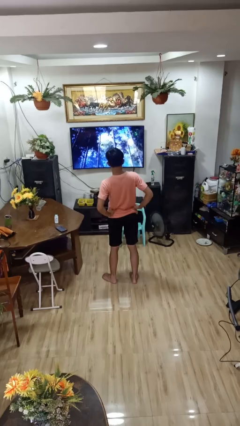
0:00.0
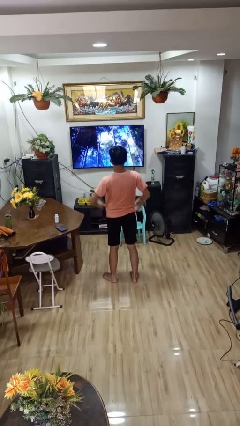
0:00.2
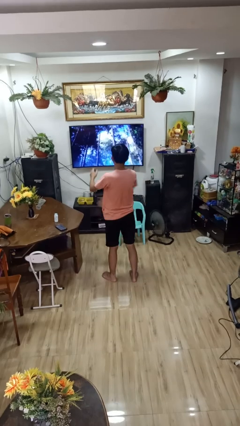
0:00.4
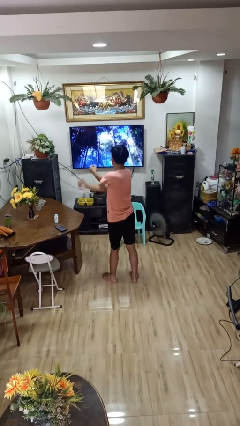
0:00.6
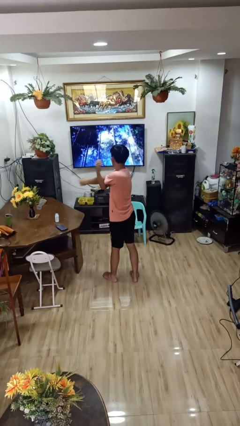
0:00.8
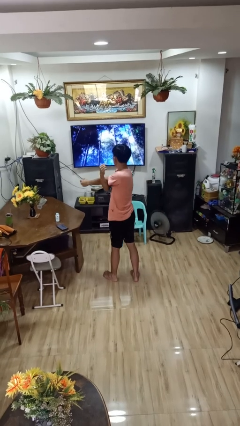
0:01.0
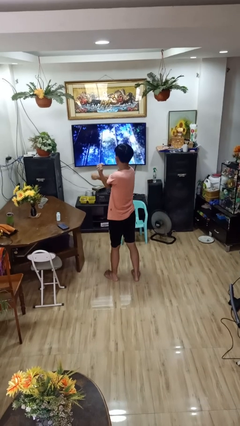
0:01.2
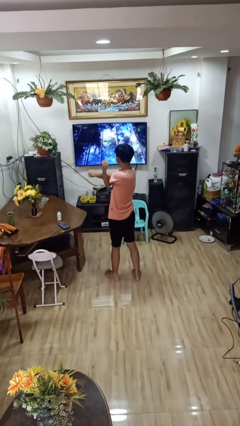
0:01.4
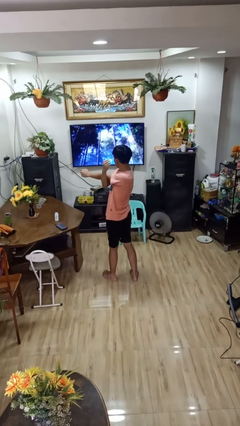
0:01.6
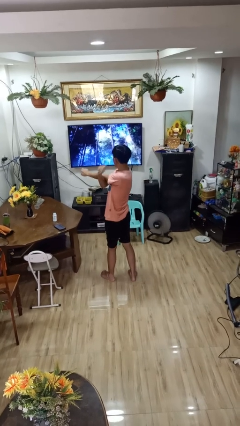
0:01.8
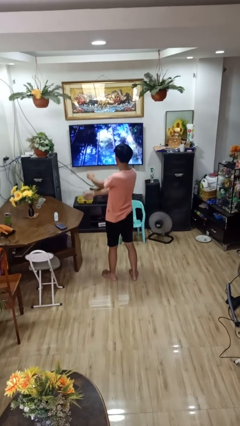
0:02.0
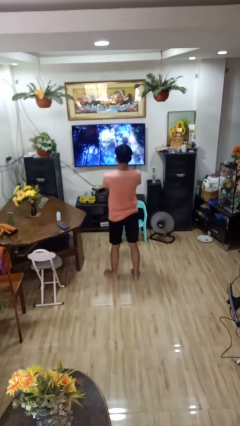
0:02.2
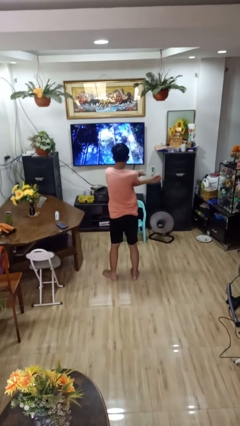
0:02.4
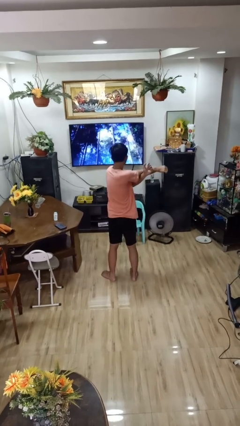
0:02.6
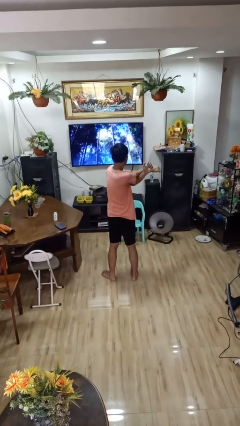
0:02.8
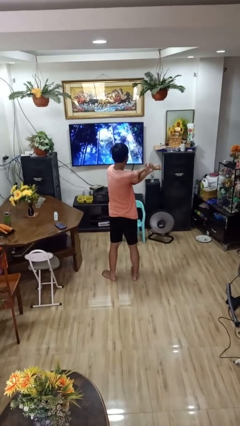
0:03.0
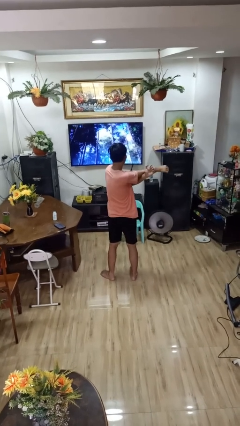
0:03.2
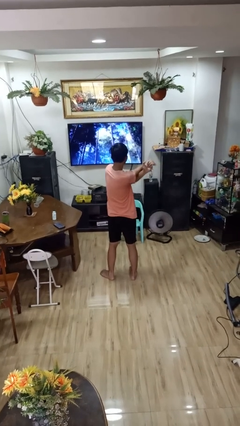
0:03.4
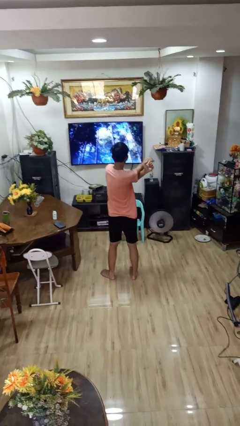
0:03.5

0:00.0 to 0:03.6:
person stretches arms to side

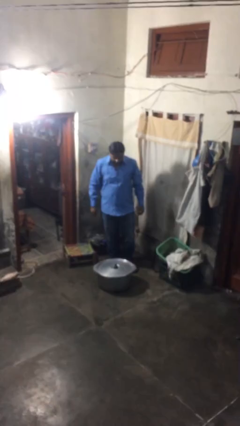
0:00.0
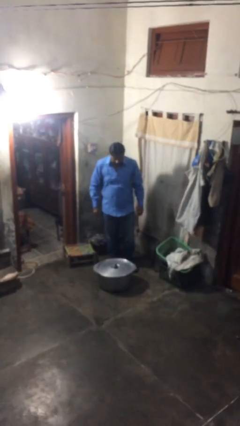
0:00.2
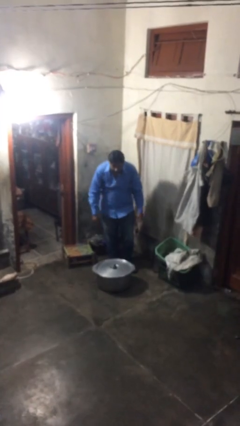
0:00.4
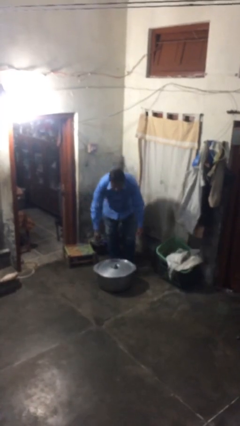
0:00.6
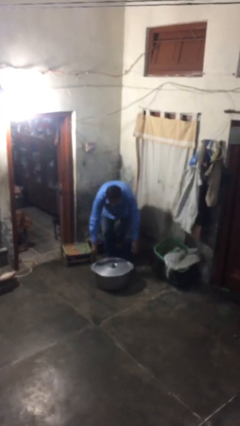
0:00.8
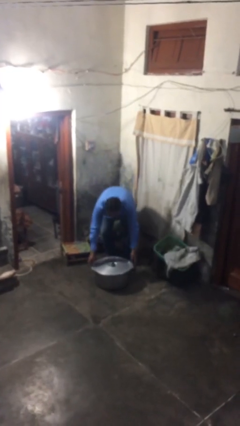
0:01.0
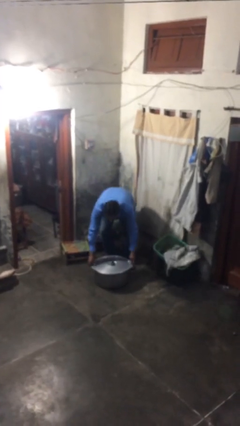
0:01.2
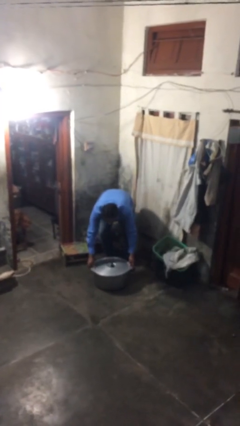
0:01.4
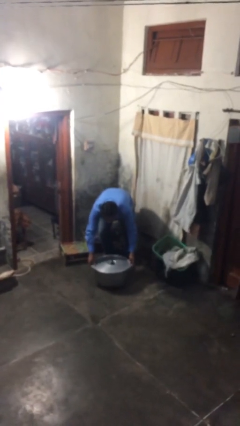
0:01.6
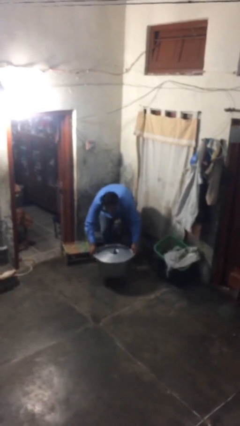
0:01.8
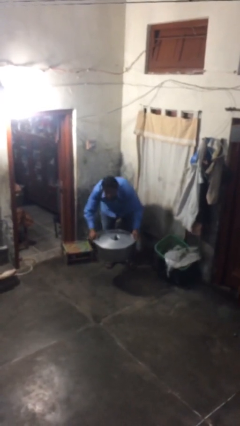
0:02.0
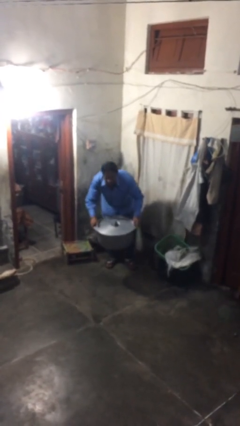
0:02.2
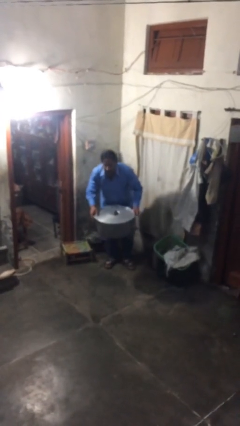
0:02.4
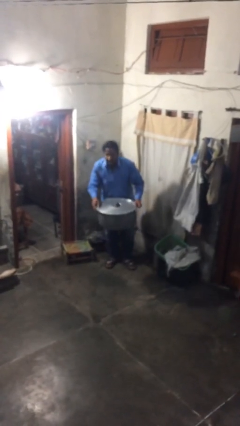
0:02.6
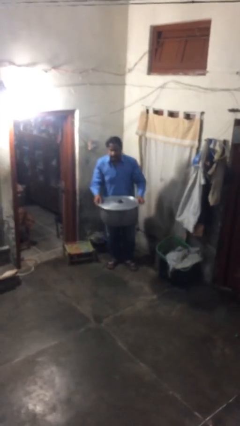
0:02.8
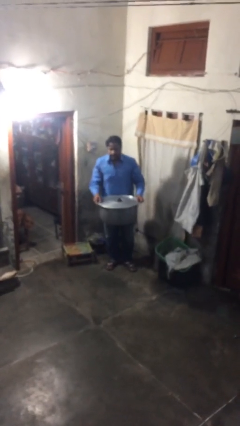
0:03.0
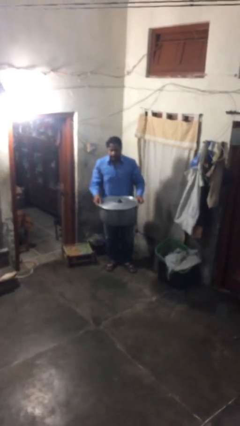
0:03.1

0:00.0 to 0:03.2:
person picks up object from floor

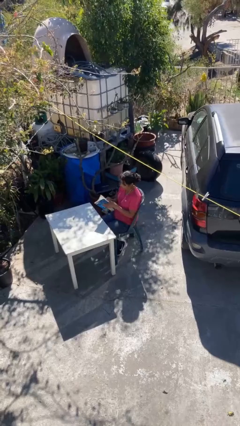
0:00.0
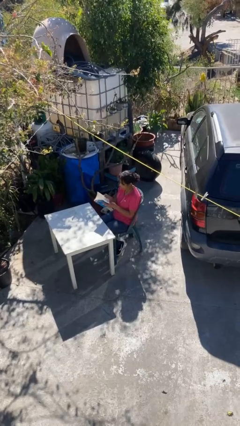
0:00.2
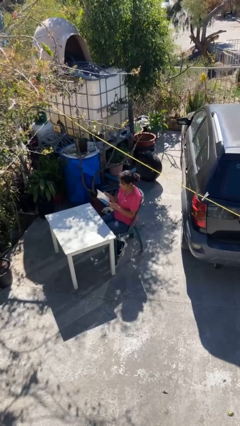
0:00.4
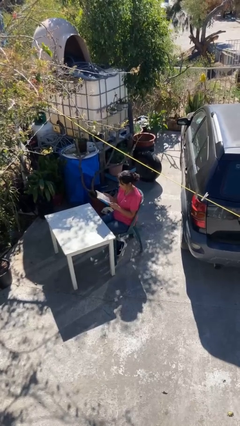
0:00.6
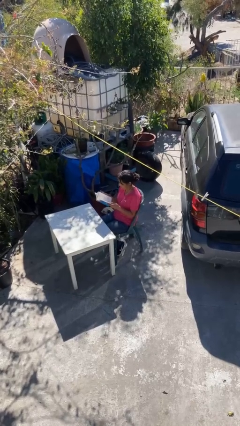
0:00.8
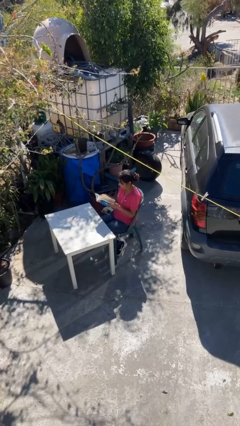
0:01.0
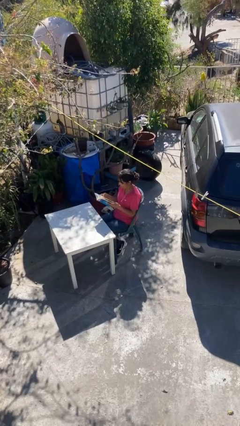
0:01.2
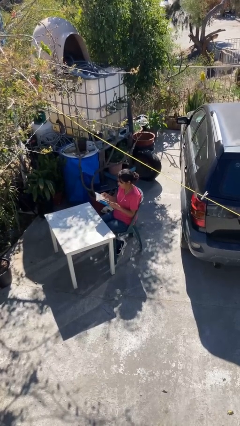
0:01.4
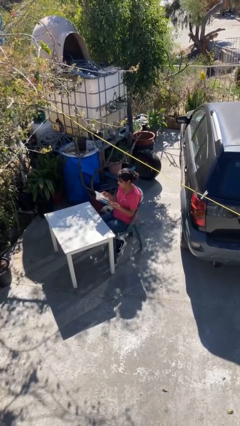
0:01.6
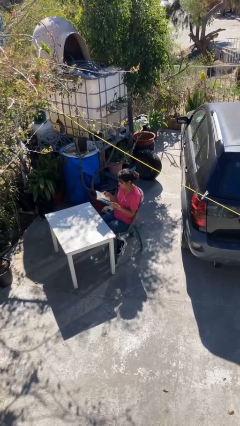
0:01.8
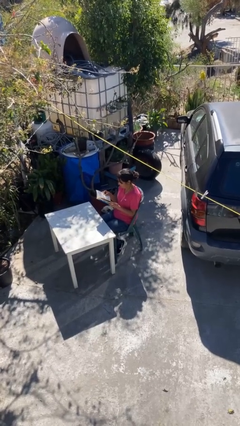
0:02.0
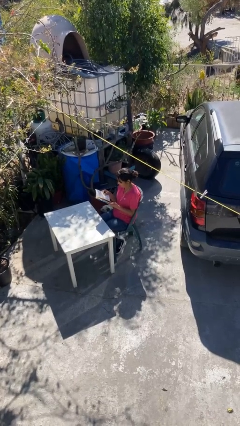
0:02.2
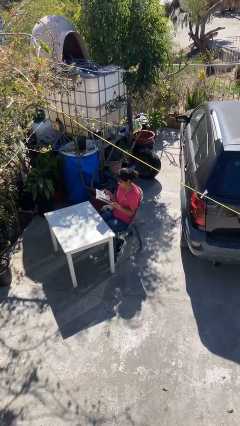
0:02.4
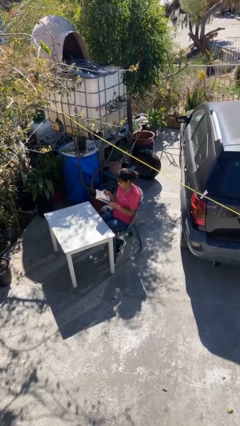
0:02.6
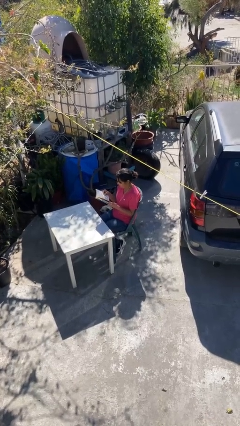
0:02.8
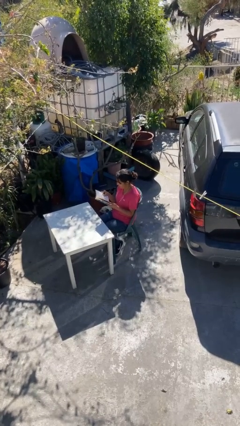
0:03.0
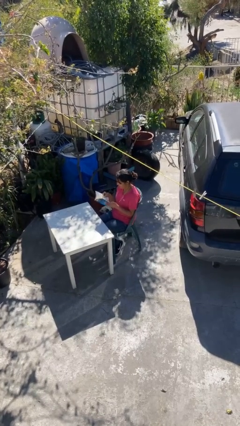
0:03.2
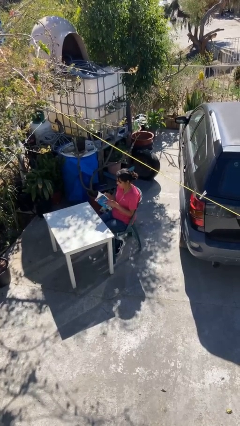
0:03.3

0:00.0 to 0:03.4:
person reads document

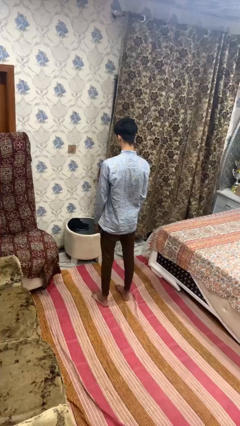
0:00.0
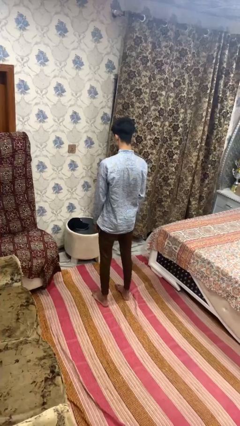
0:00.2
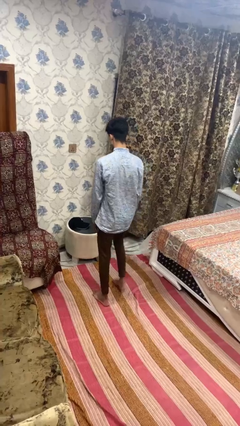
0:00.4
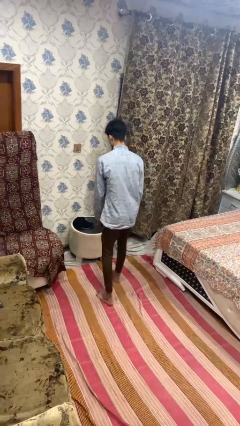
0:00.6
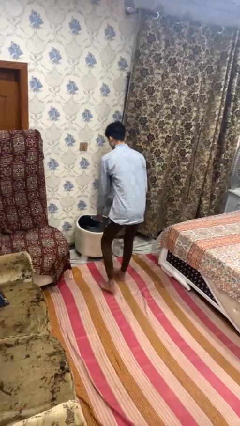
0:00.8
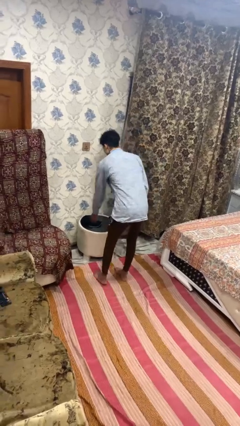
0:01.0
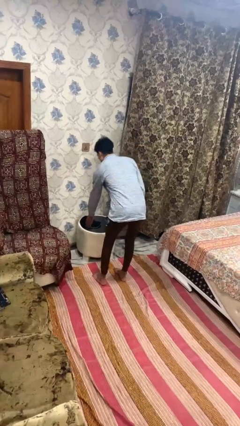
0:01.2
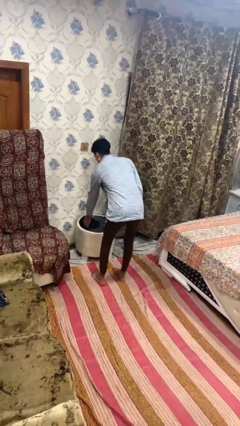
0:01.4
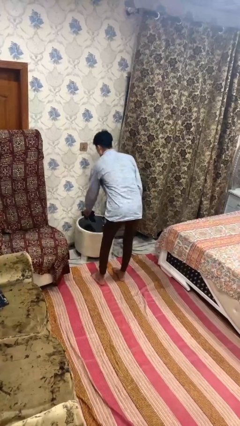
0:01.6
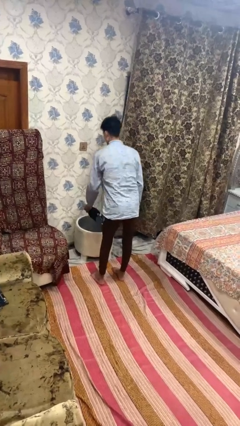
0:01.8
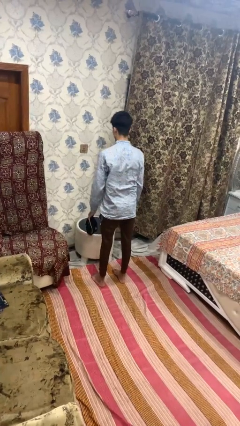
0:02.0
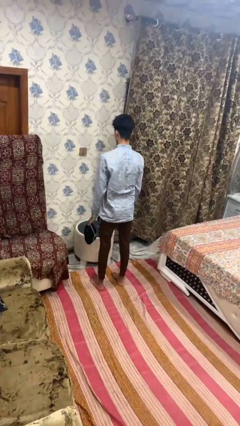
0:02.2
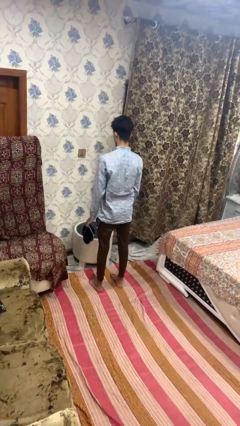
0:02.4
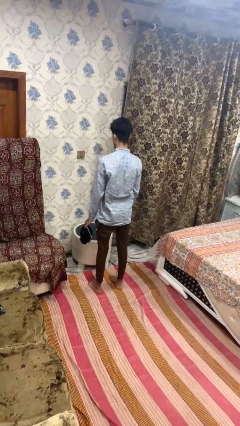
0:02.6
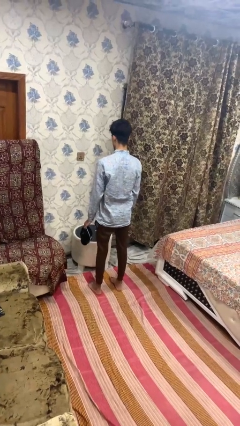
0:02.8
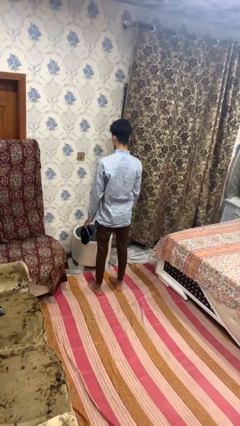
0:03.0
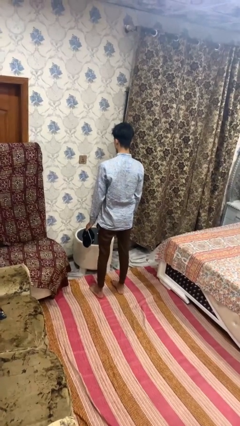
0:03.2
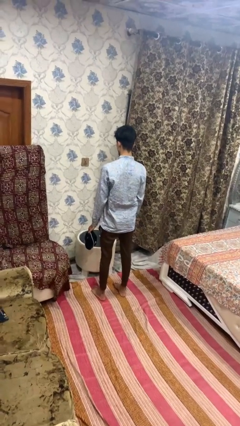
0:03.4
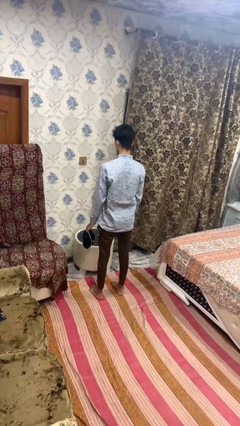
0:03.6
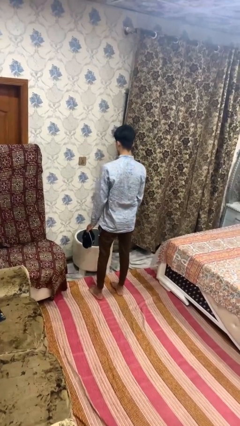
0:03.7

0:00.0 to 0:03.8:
person picks up object from table

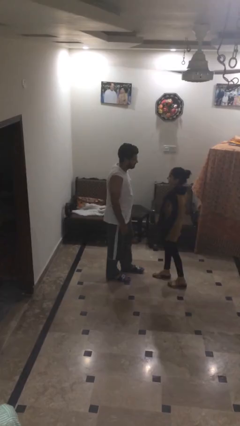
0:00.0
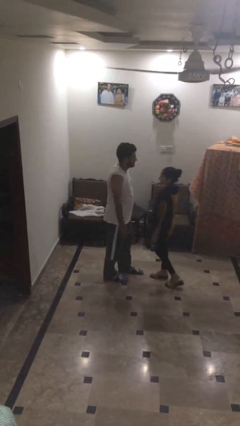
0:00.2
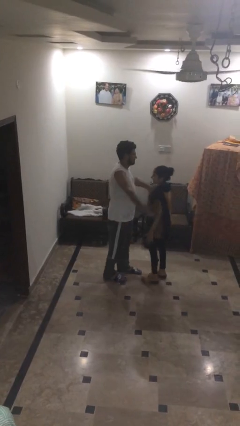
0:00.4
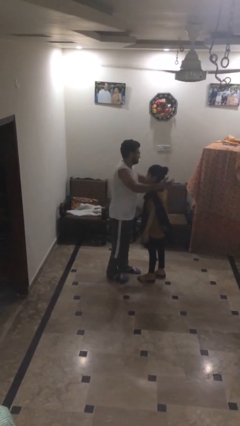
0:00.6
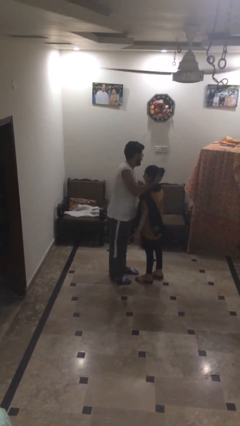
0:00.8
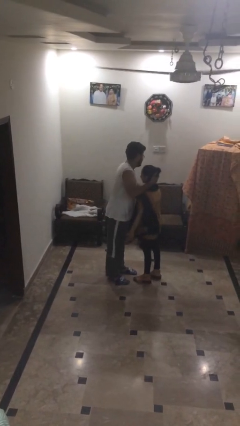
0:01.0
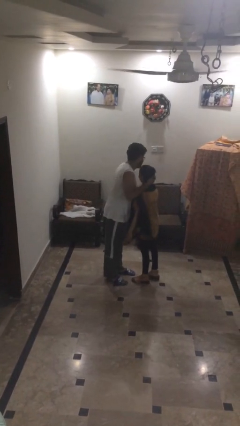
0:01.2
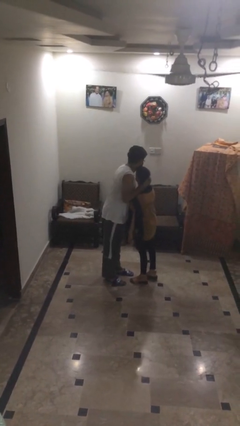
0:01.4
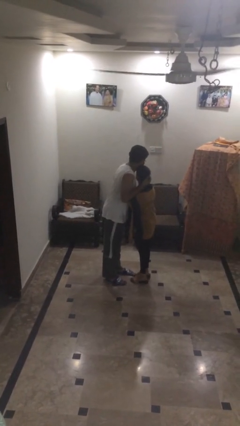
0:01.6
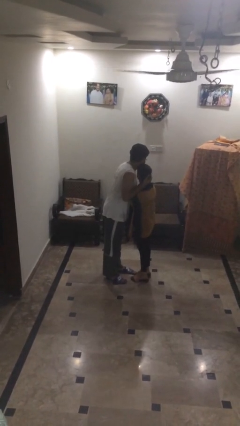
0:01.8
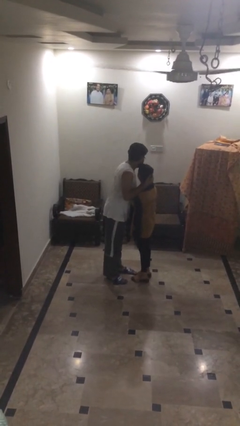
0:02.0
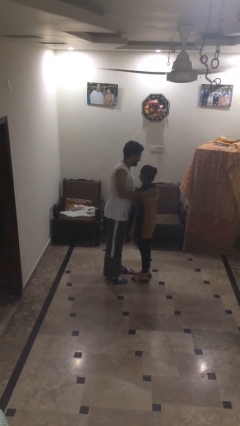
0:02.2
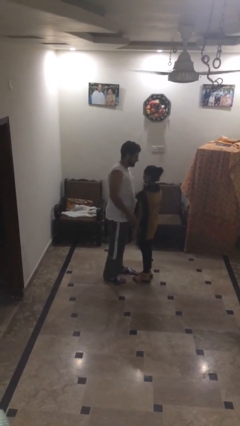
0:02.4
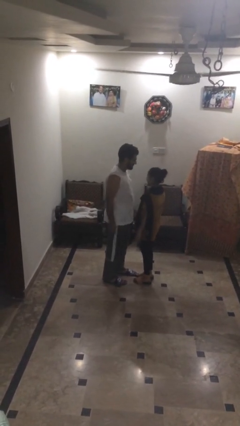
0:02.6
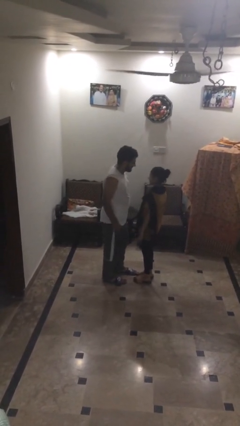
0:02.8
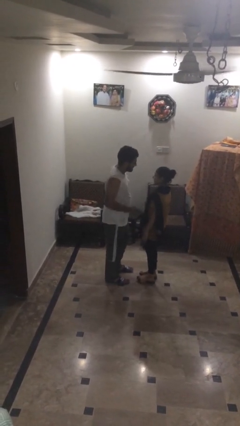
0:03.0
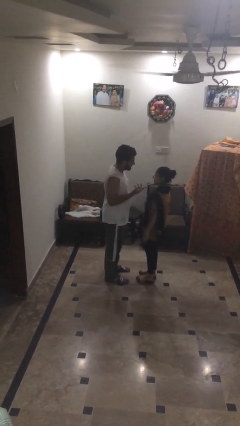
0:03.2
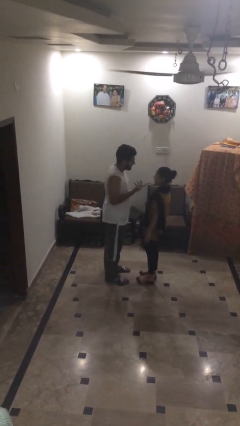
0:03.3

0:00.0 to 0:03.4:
person embraces person

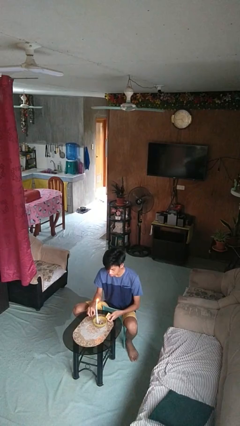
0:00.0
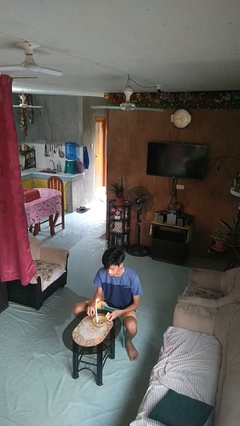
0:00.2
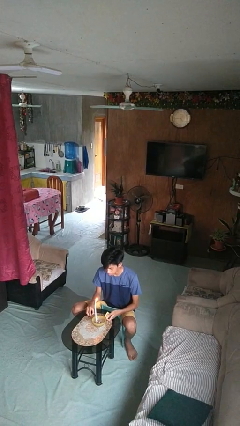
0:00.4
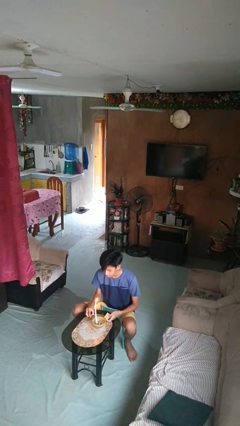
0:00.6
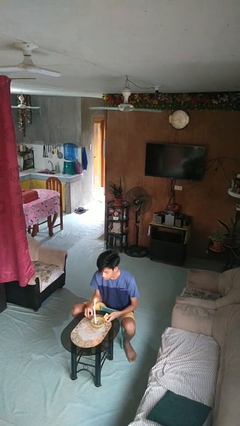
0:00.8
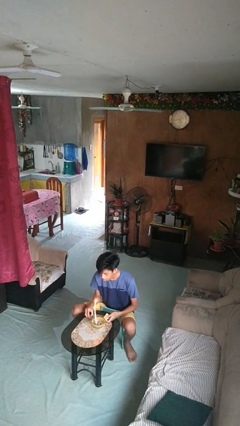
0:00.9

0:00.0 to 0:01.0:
person extinguishes candle
